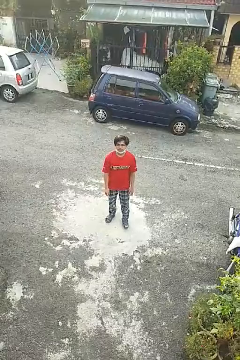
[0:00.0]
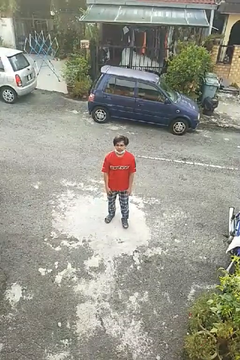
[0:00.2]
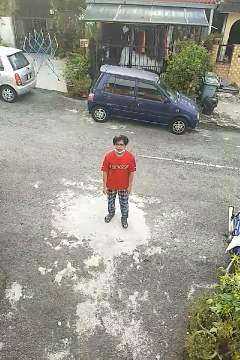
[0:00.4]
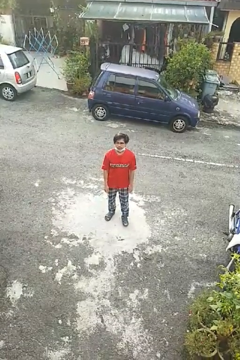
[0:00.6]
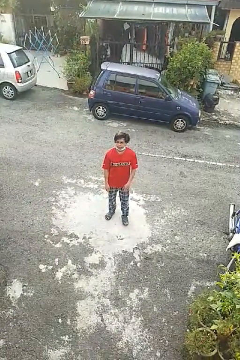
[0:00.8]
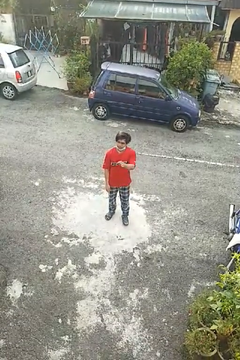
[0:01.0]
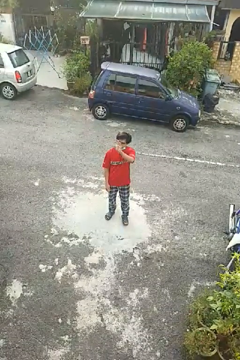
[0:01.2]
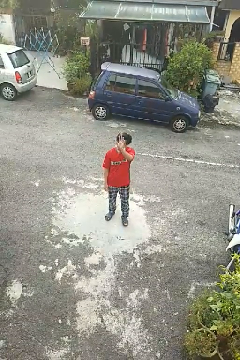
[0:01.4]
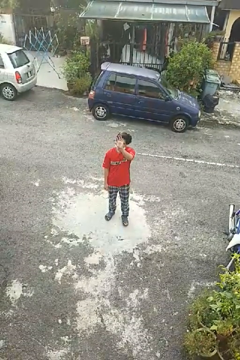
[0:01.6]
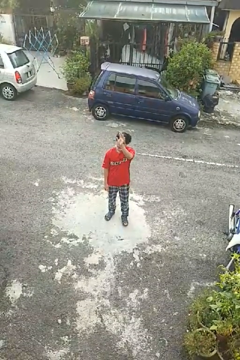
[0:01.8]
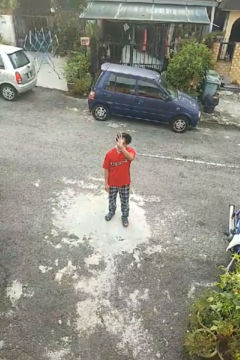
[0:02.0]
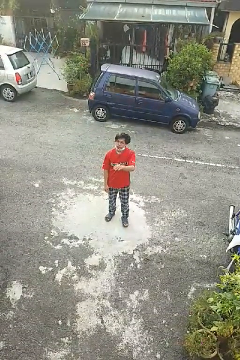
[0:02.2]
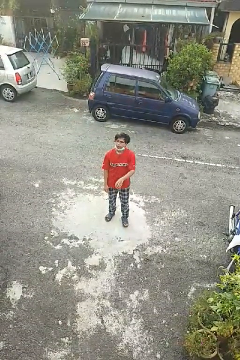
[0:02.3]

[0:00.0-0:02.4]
person waves at person

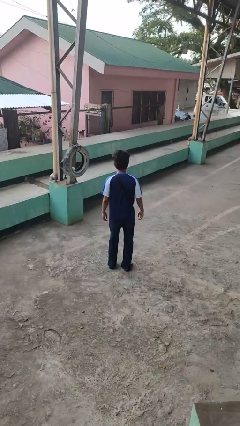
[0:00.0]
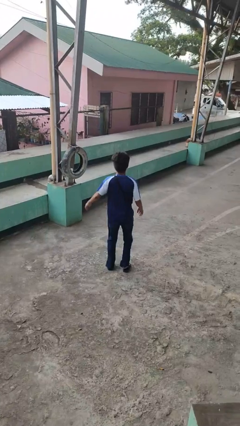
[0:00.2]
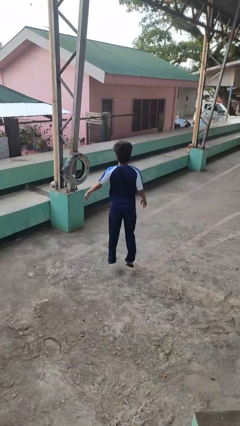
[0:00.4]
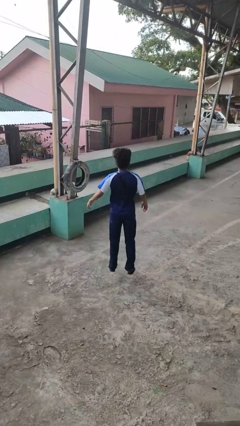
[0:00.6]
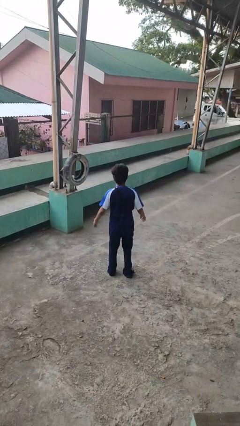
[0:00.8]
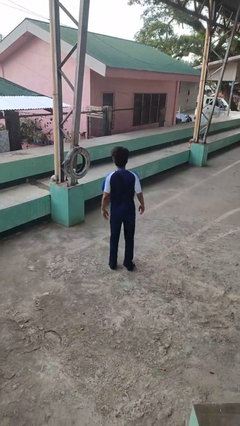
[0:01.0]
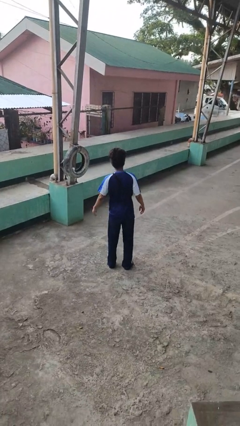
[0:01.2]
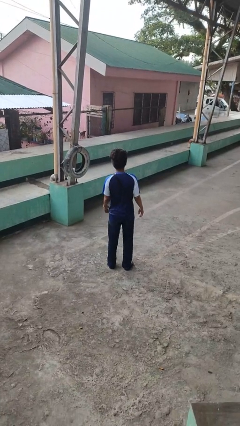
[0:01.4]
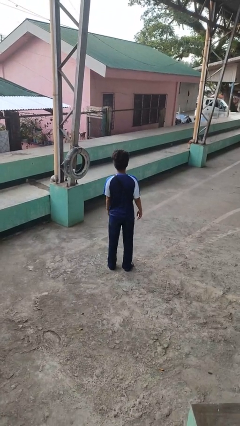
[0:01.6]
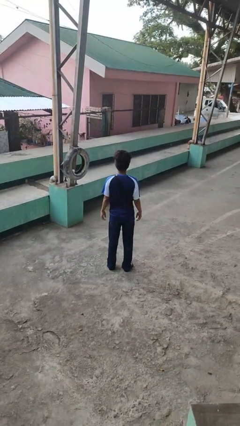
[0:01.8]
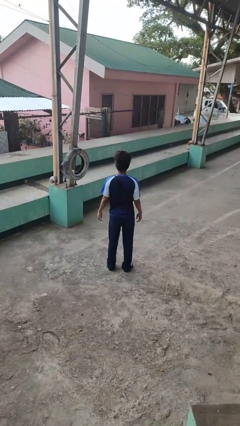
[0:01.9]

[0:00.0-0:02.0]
person jumps

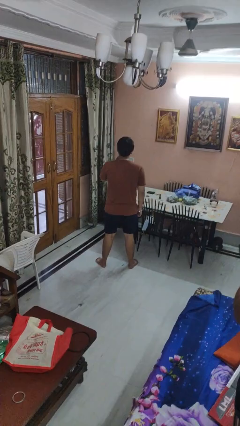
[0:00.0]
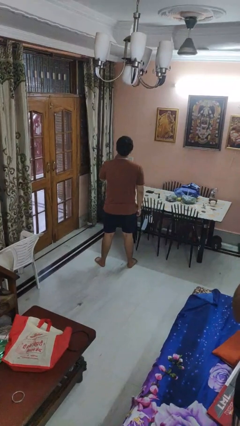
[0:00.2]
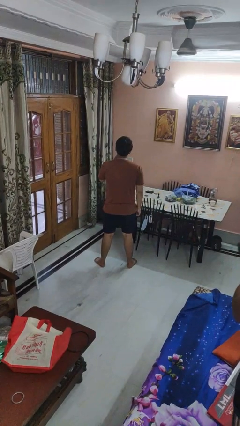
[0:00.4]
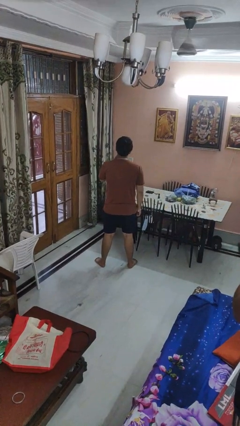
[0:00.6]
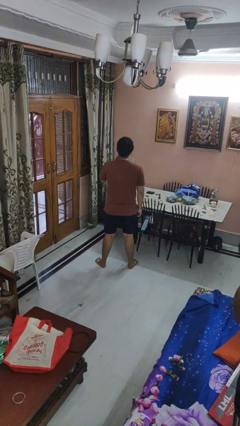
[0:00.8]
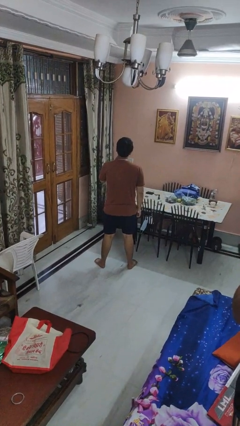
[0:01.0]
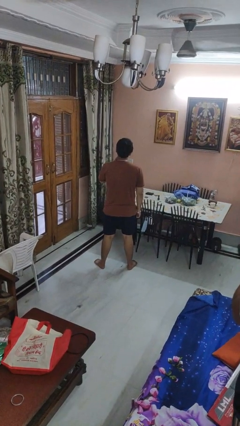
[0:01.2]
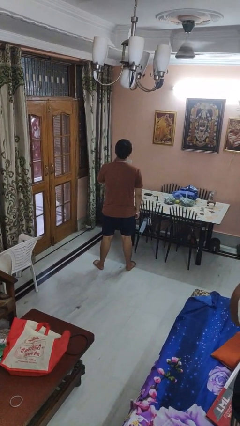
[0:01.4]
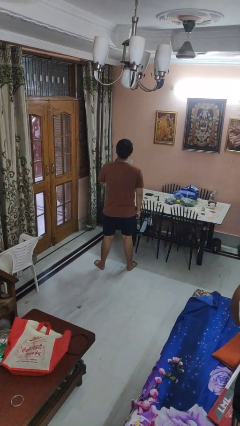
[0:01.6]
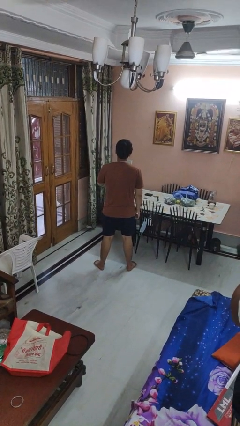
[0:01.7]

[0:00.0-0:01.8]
person strokes chin

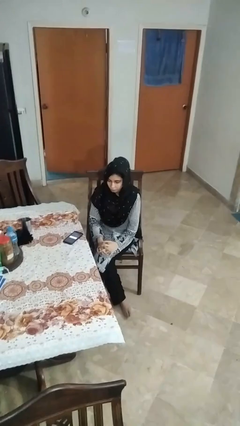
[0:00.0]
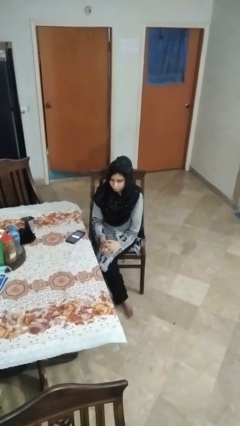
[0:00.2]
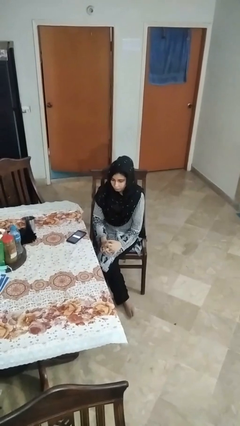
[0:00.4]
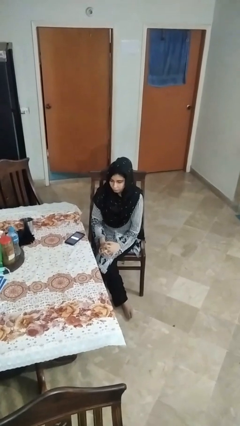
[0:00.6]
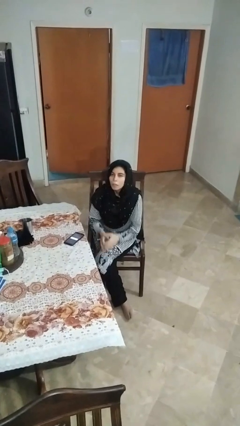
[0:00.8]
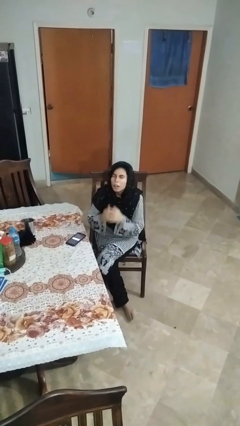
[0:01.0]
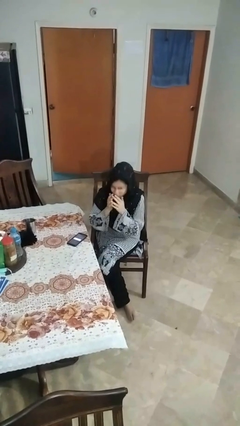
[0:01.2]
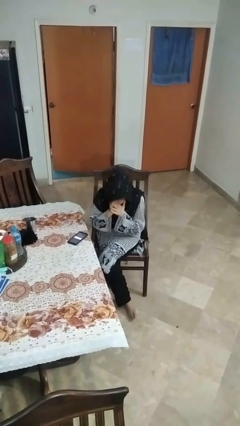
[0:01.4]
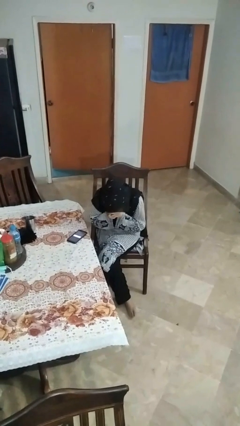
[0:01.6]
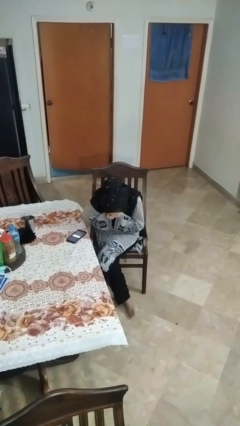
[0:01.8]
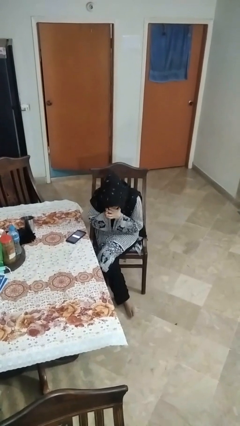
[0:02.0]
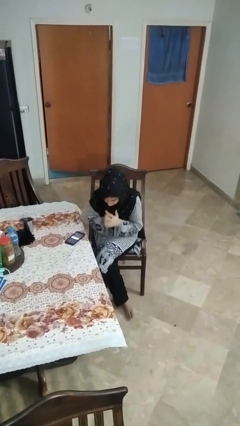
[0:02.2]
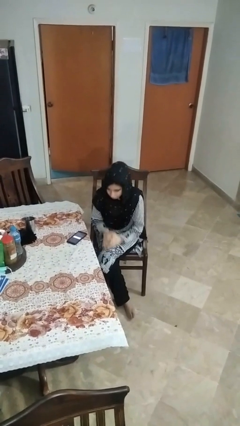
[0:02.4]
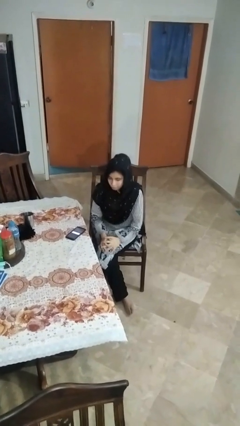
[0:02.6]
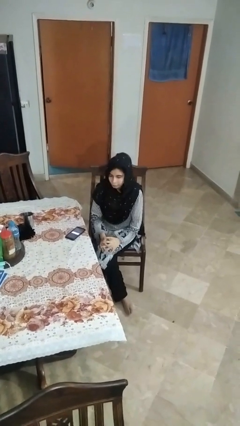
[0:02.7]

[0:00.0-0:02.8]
person sneezes into hand

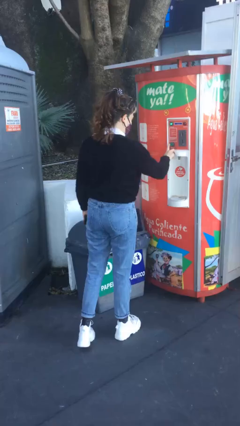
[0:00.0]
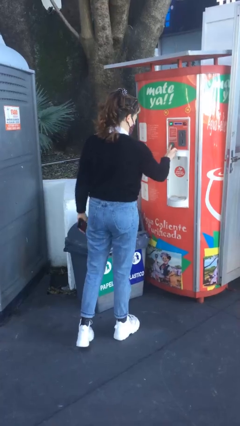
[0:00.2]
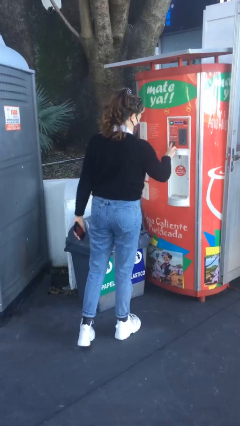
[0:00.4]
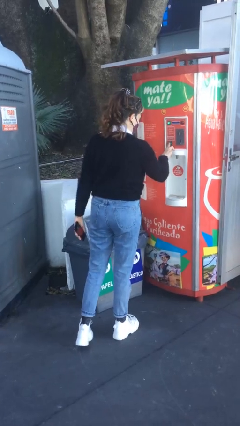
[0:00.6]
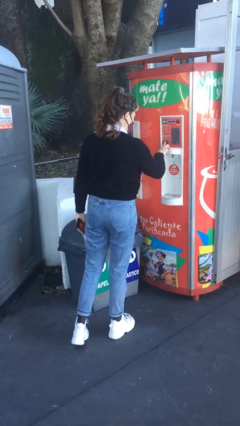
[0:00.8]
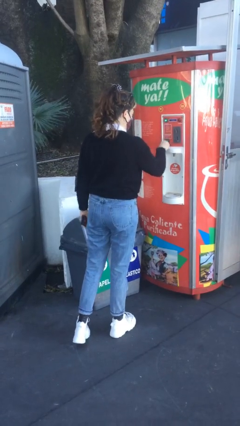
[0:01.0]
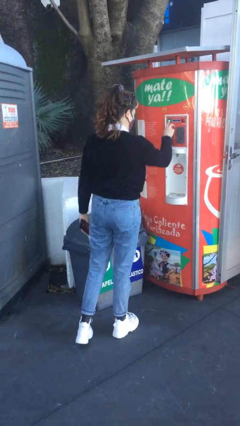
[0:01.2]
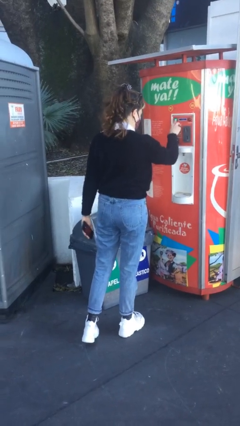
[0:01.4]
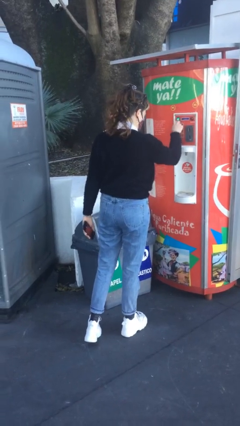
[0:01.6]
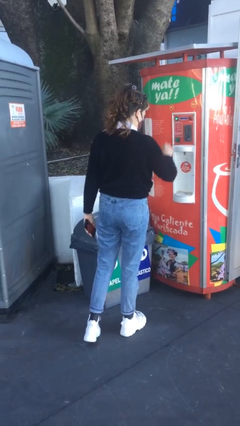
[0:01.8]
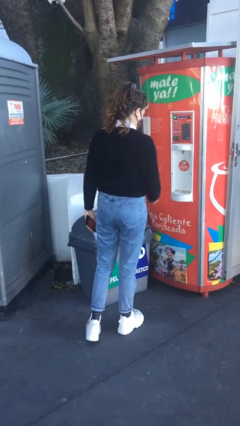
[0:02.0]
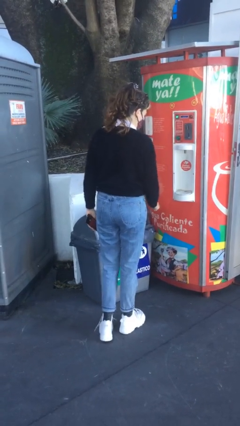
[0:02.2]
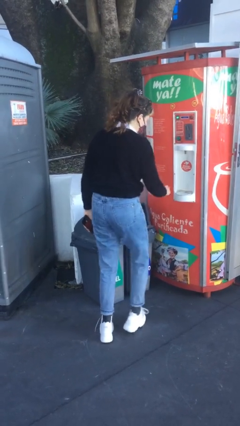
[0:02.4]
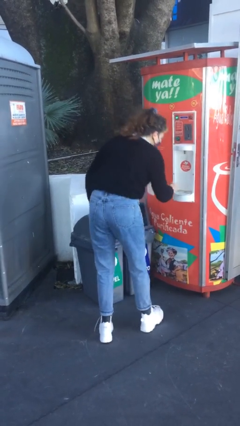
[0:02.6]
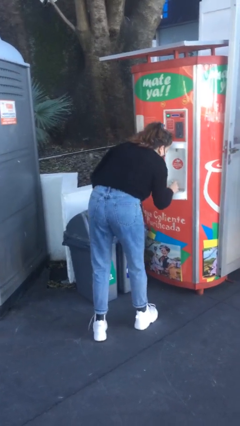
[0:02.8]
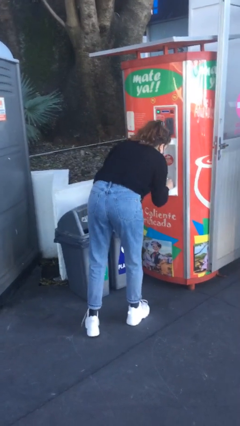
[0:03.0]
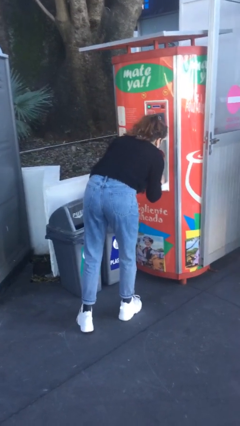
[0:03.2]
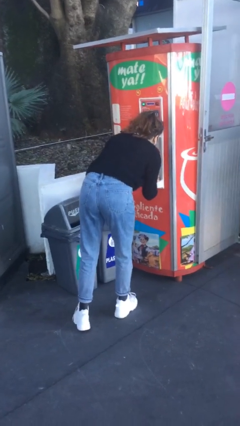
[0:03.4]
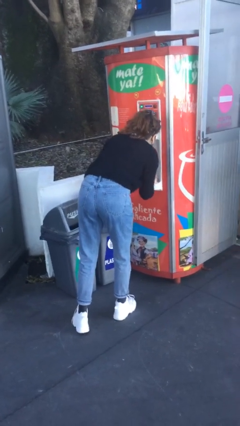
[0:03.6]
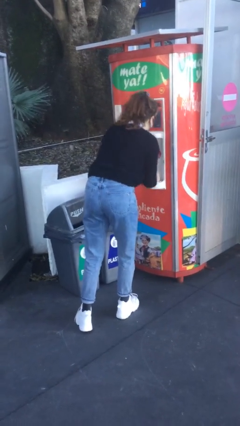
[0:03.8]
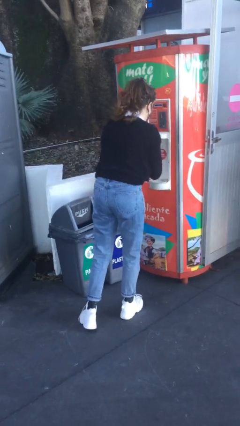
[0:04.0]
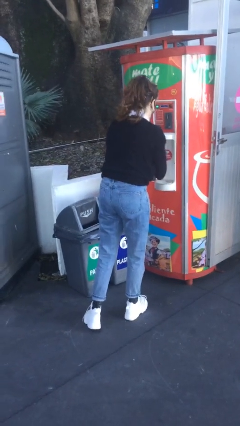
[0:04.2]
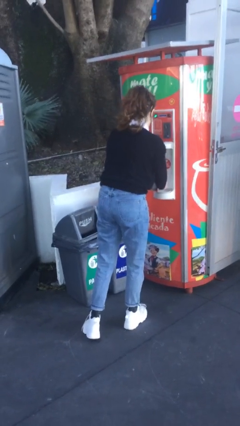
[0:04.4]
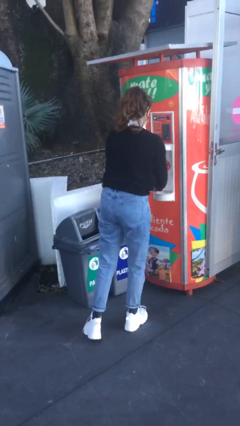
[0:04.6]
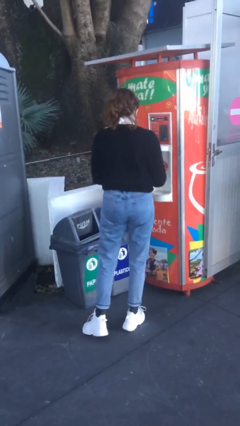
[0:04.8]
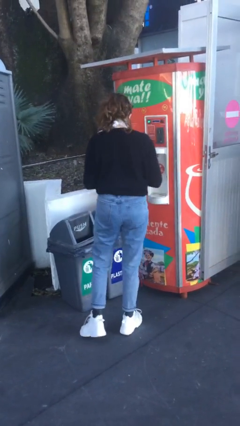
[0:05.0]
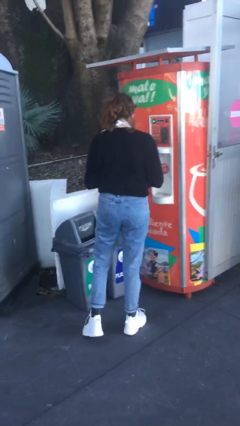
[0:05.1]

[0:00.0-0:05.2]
person purchases from machine

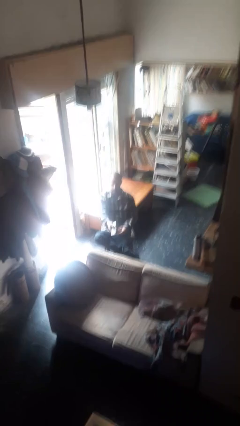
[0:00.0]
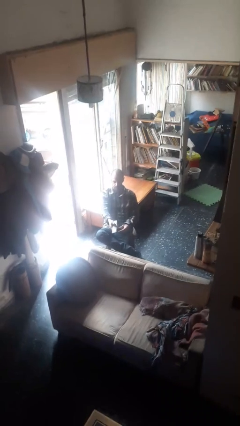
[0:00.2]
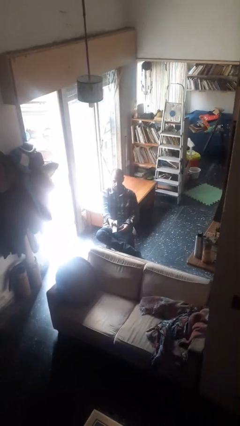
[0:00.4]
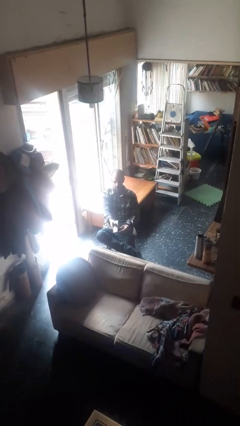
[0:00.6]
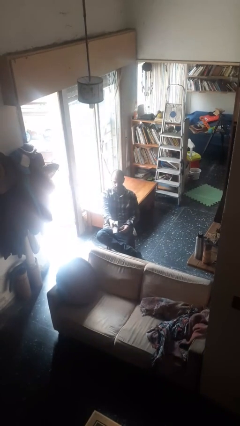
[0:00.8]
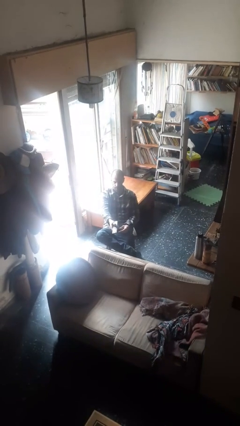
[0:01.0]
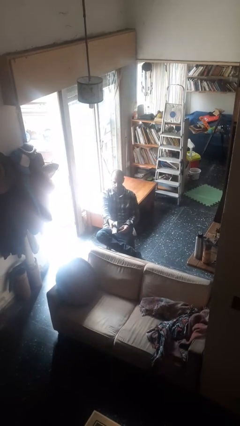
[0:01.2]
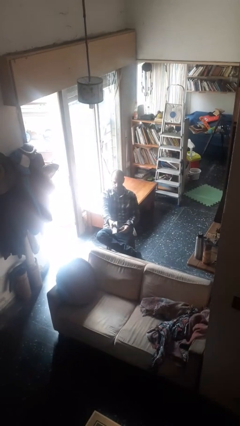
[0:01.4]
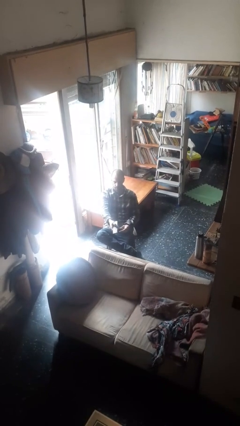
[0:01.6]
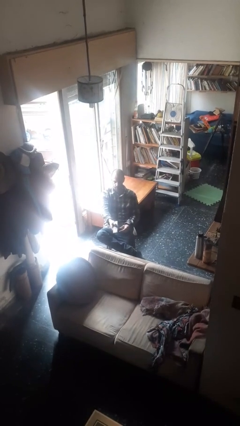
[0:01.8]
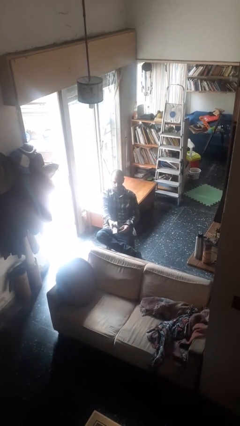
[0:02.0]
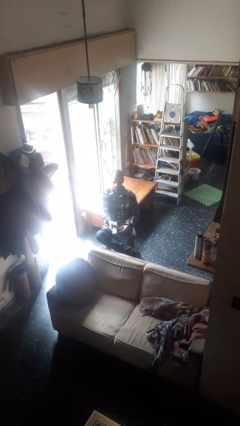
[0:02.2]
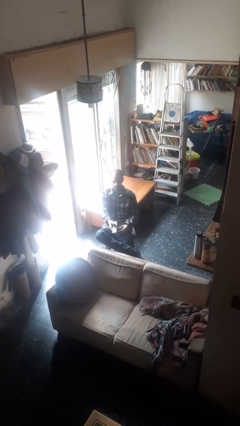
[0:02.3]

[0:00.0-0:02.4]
person uses television remote

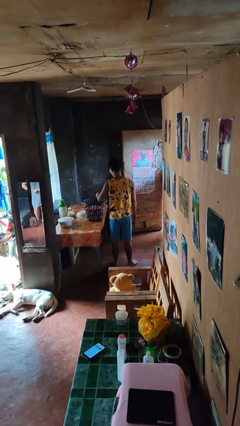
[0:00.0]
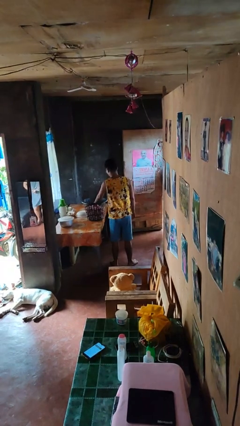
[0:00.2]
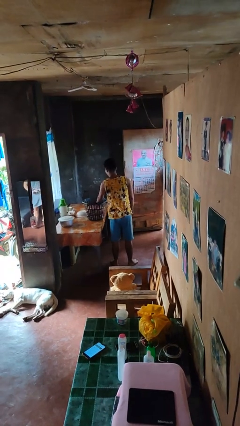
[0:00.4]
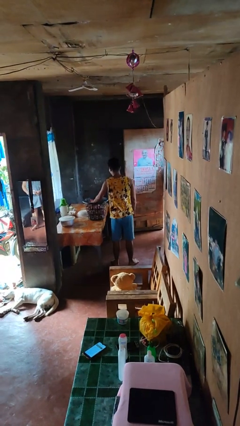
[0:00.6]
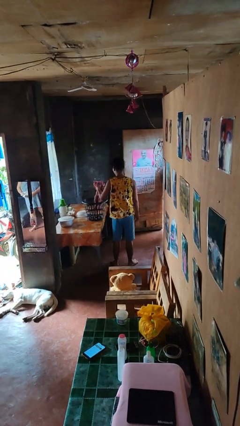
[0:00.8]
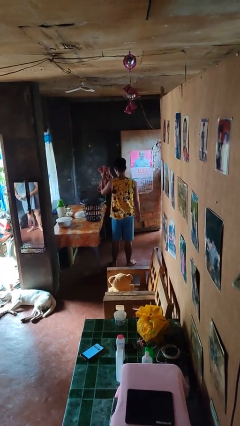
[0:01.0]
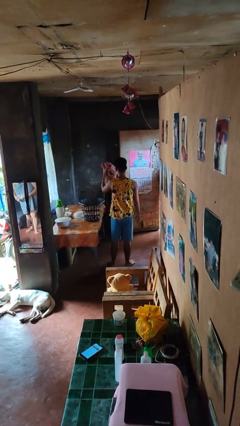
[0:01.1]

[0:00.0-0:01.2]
person takes object from basket
